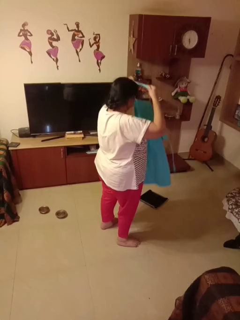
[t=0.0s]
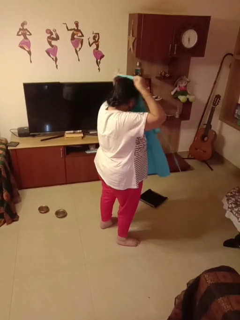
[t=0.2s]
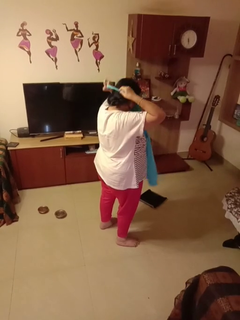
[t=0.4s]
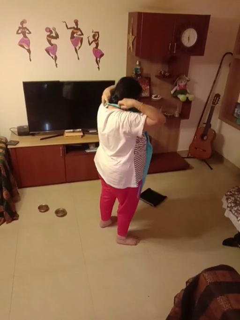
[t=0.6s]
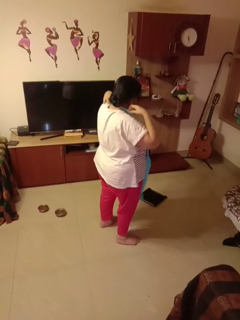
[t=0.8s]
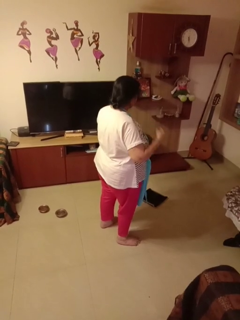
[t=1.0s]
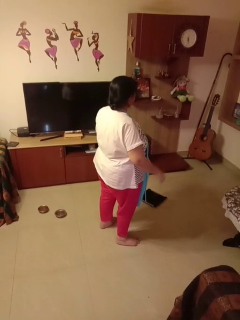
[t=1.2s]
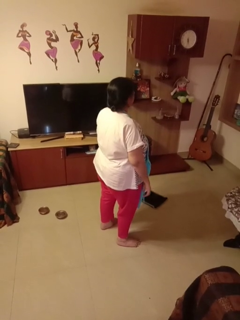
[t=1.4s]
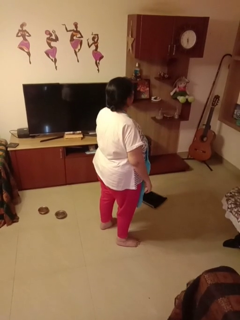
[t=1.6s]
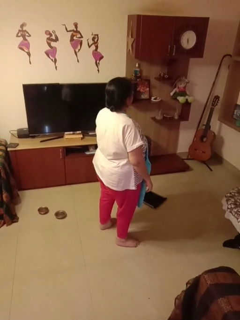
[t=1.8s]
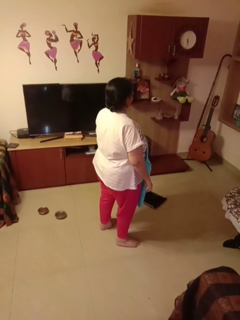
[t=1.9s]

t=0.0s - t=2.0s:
person puts on apron

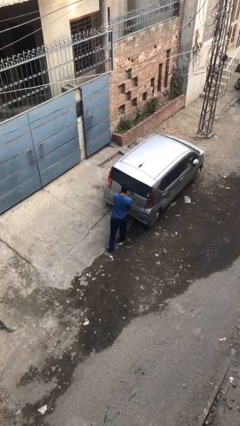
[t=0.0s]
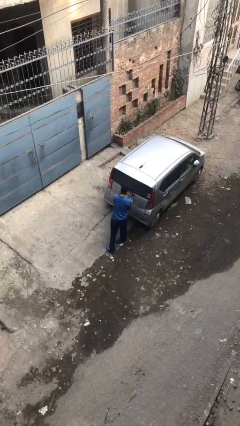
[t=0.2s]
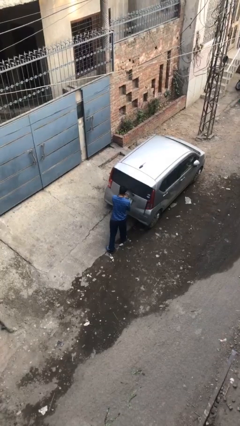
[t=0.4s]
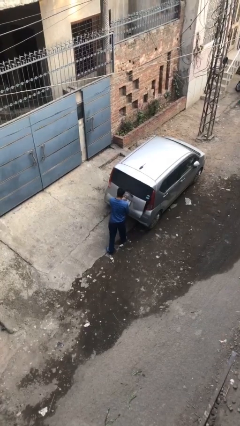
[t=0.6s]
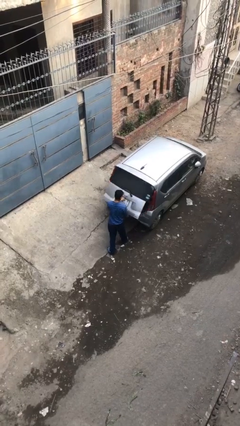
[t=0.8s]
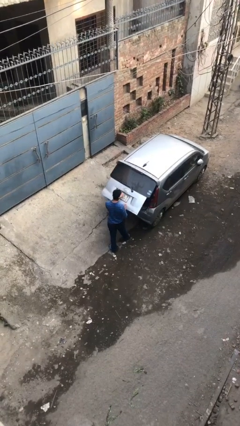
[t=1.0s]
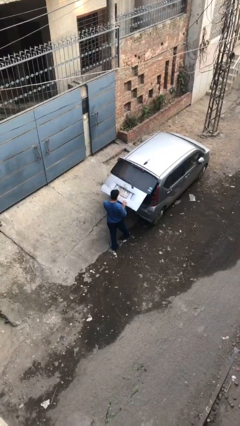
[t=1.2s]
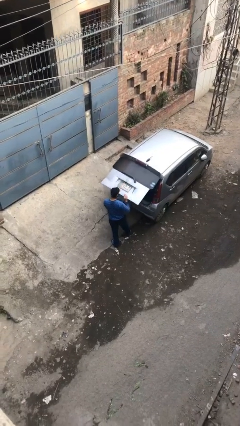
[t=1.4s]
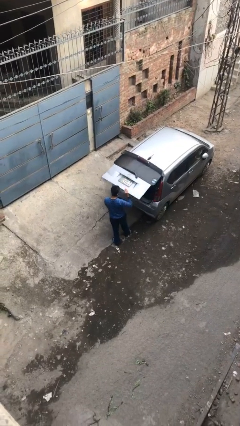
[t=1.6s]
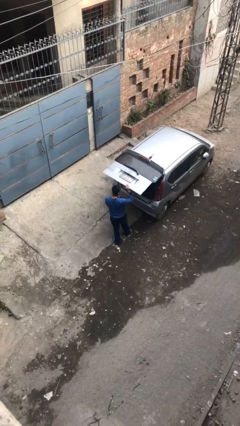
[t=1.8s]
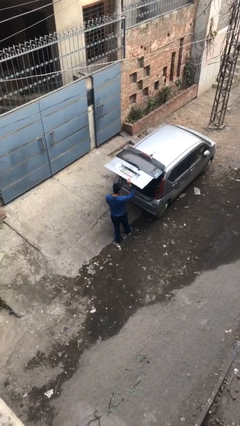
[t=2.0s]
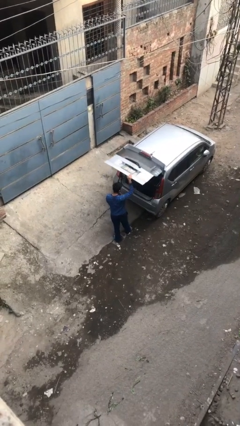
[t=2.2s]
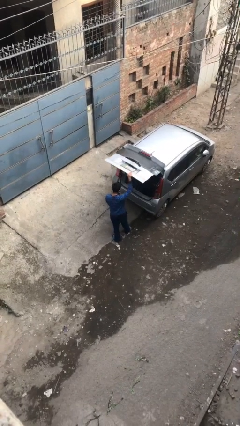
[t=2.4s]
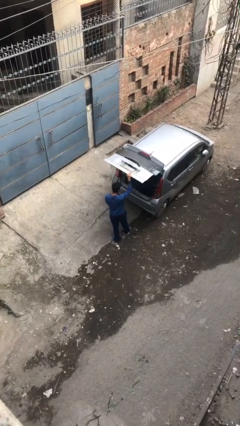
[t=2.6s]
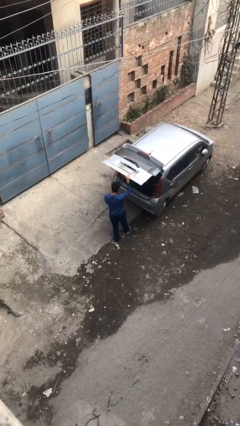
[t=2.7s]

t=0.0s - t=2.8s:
person opens car trunk

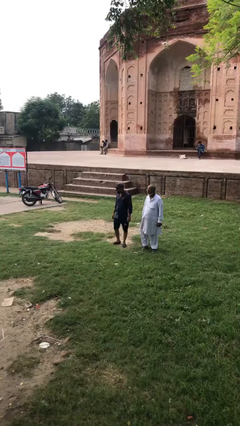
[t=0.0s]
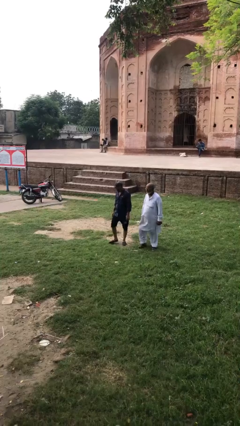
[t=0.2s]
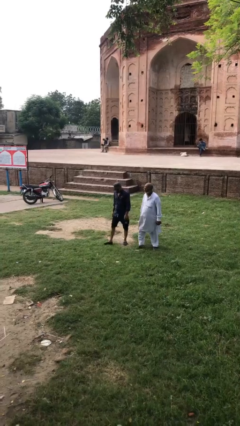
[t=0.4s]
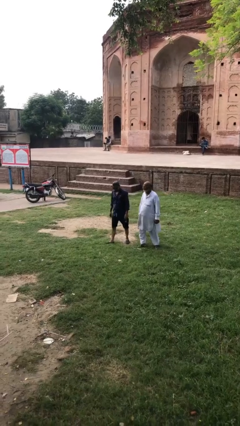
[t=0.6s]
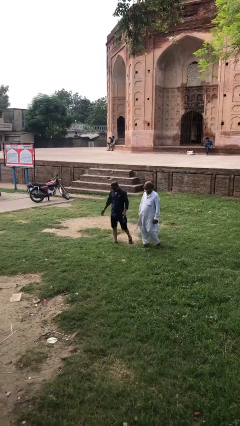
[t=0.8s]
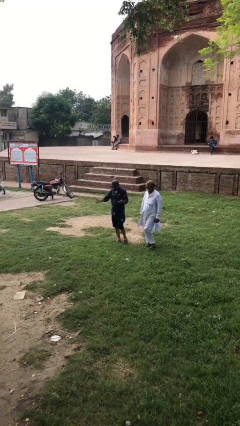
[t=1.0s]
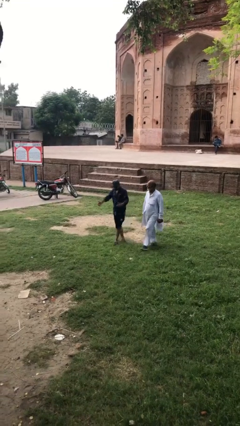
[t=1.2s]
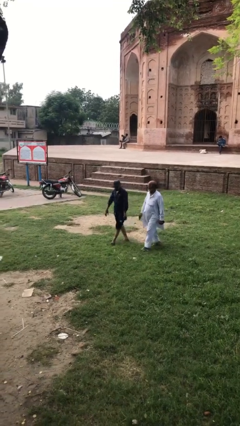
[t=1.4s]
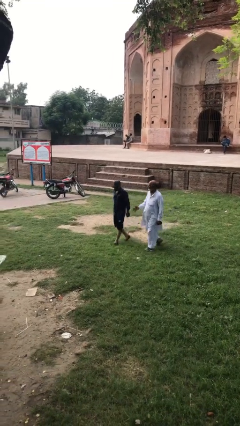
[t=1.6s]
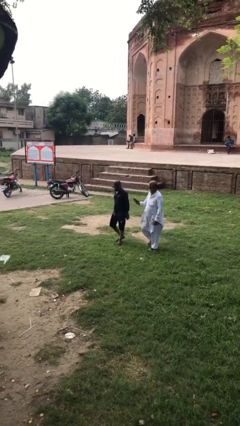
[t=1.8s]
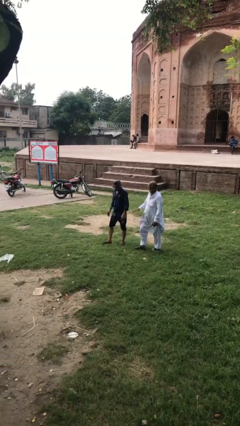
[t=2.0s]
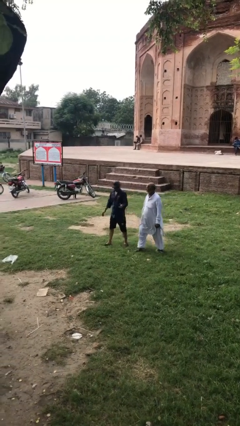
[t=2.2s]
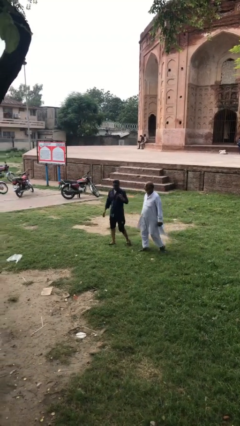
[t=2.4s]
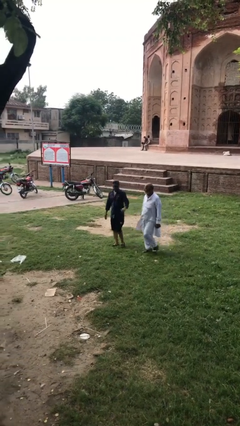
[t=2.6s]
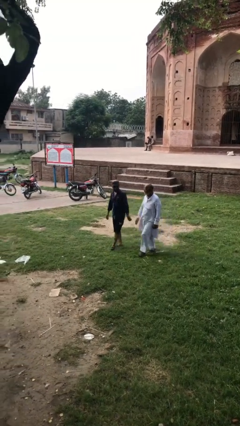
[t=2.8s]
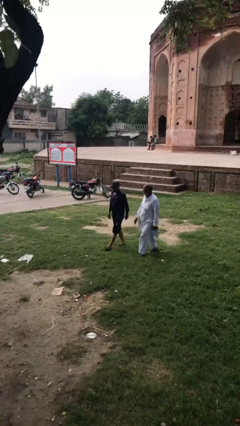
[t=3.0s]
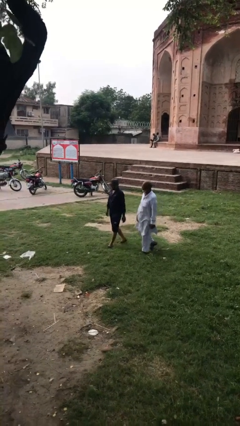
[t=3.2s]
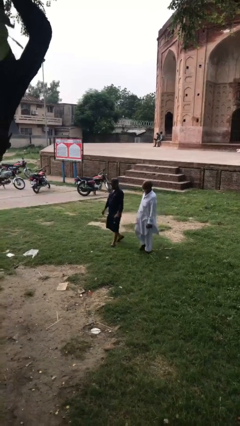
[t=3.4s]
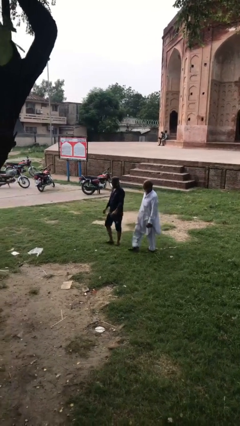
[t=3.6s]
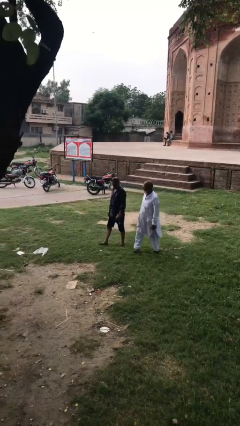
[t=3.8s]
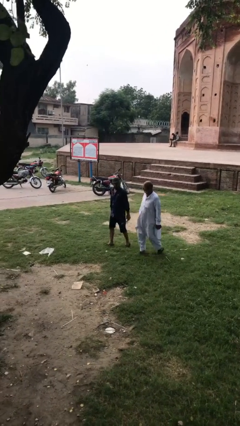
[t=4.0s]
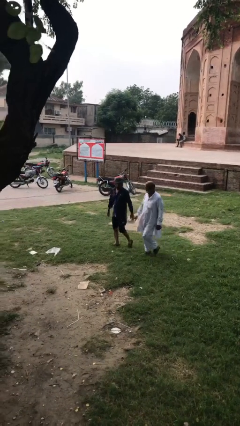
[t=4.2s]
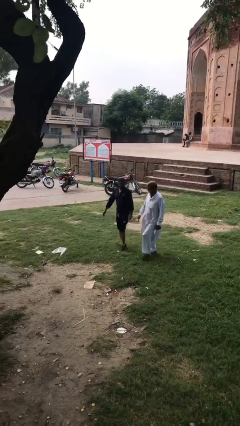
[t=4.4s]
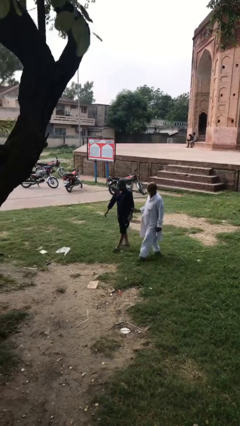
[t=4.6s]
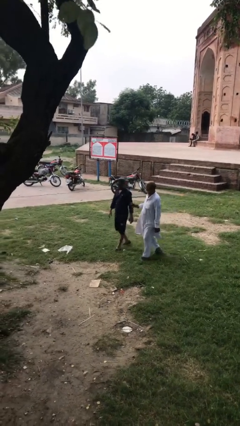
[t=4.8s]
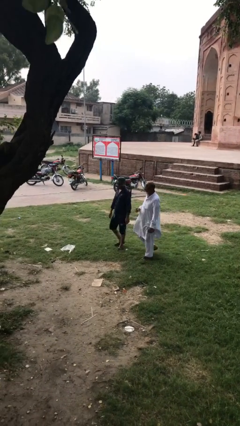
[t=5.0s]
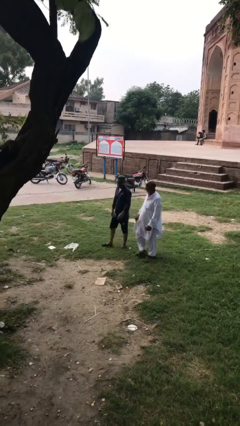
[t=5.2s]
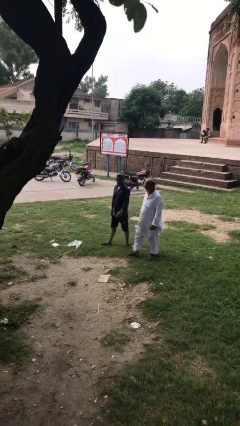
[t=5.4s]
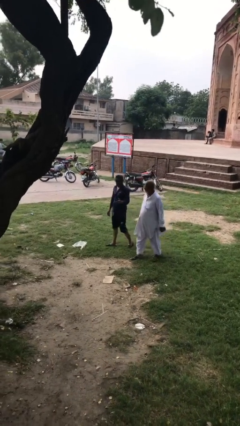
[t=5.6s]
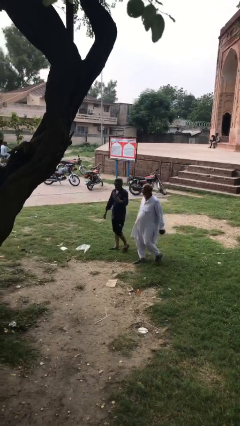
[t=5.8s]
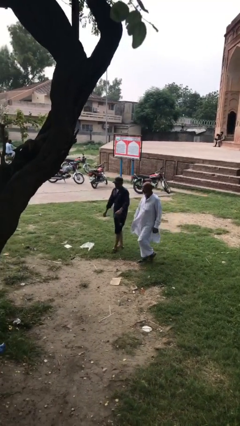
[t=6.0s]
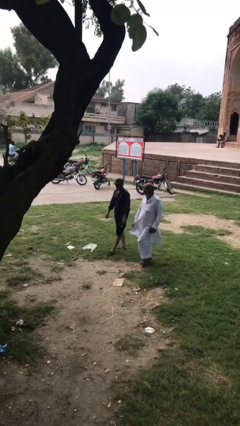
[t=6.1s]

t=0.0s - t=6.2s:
person talks to person

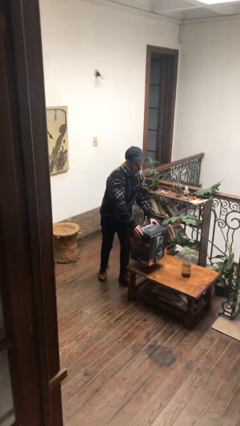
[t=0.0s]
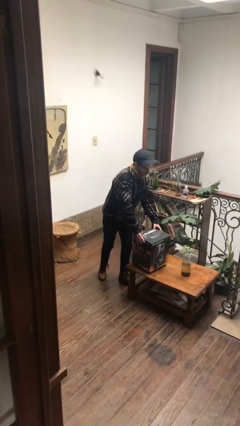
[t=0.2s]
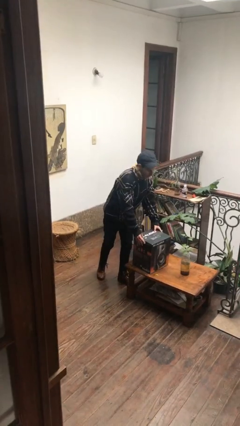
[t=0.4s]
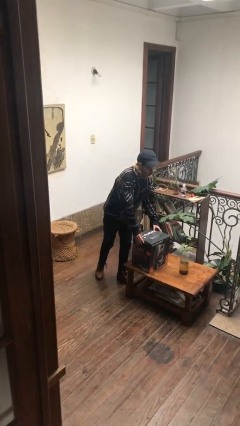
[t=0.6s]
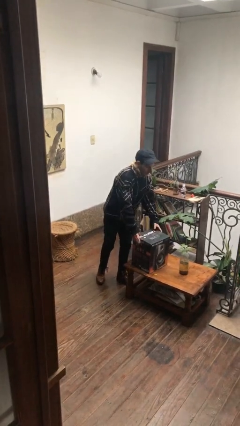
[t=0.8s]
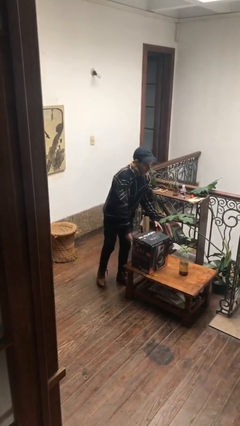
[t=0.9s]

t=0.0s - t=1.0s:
person puts down object on table

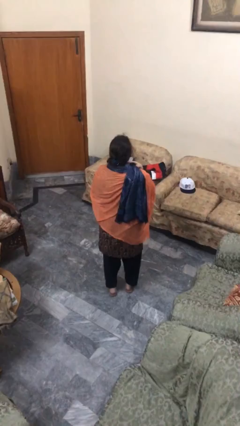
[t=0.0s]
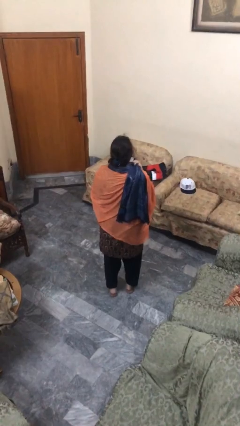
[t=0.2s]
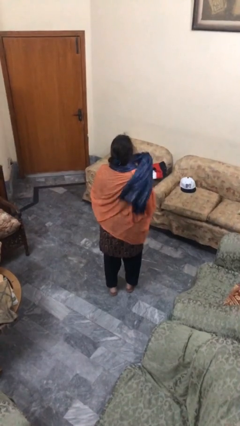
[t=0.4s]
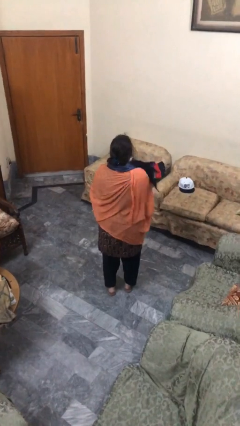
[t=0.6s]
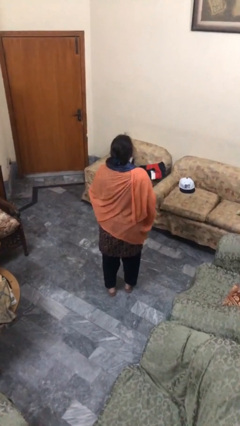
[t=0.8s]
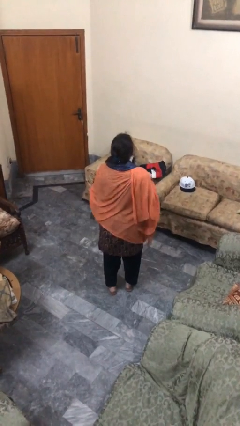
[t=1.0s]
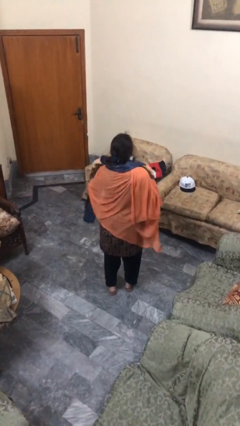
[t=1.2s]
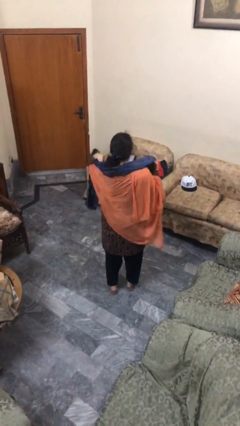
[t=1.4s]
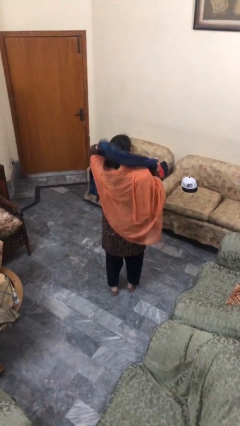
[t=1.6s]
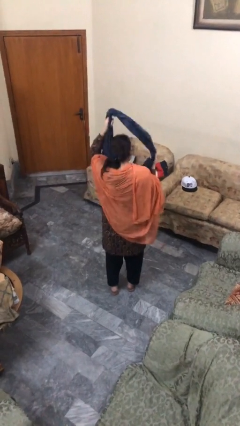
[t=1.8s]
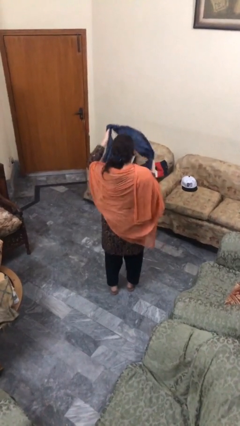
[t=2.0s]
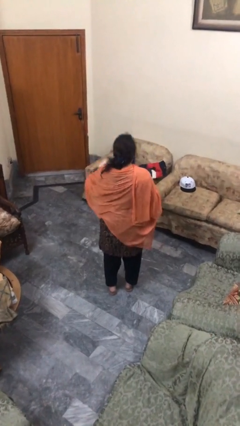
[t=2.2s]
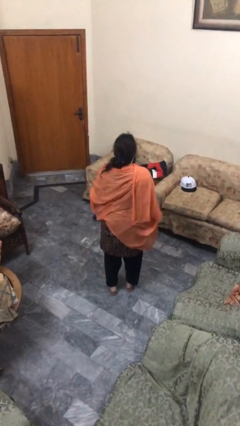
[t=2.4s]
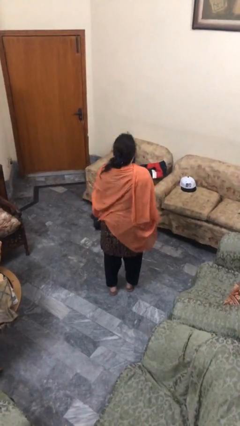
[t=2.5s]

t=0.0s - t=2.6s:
person takes off scarf

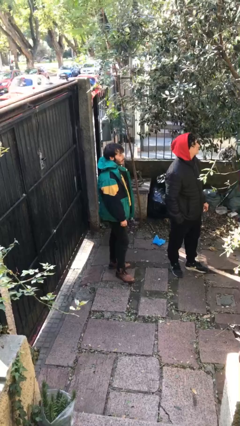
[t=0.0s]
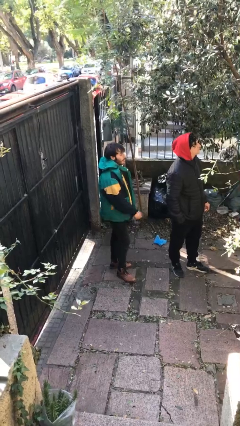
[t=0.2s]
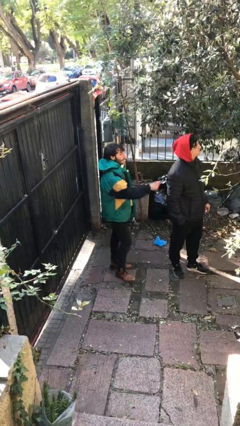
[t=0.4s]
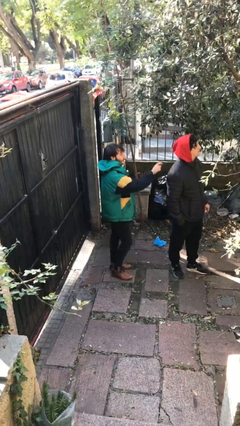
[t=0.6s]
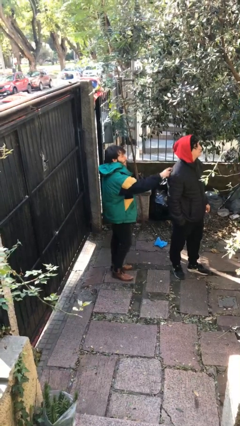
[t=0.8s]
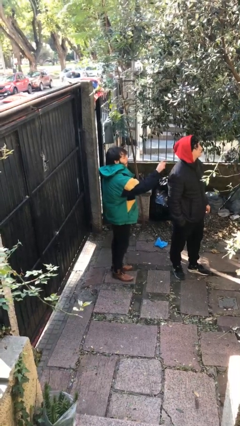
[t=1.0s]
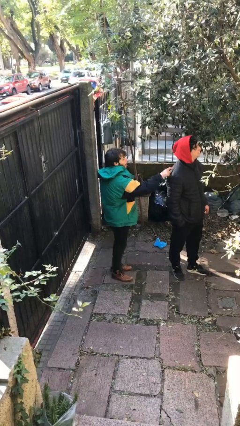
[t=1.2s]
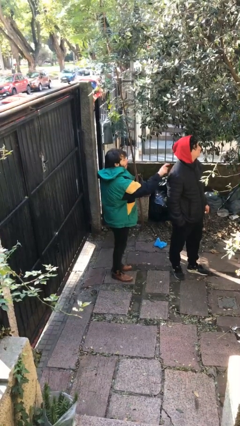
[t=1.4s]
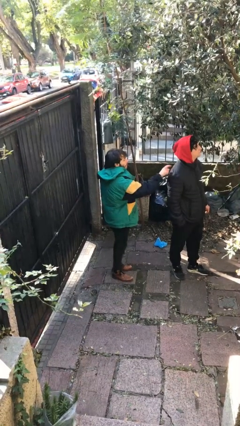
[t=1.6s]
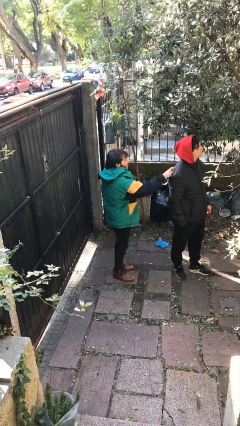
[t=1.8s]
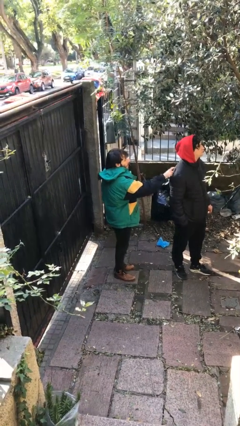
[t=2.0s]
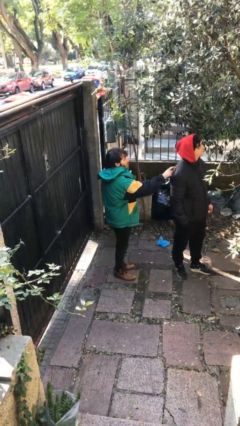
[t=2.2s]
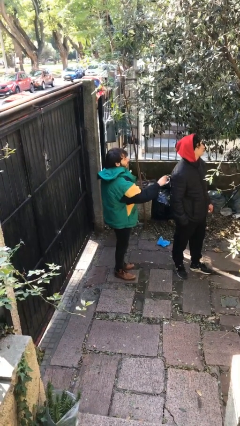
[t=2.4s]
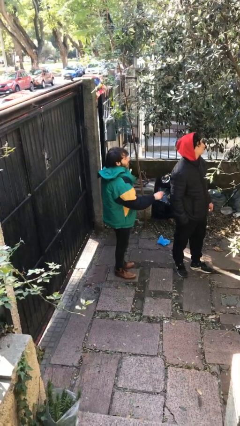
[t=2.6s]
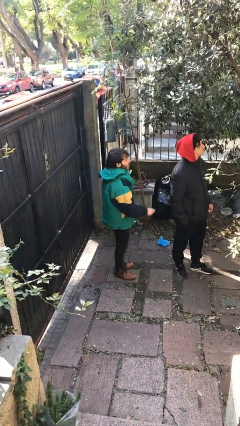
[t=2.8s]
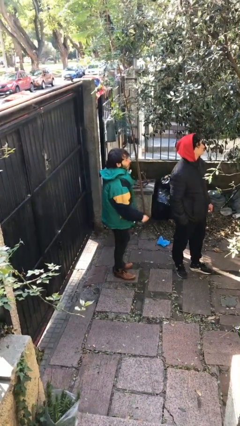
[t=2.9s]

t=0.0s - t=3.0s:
person touches back of person
